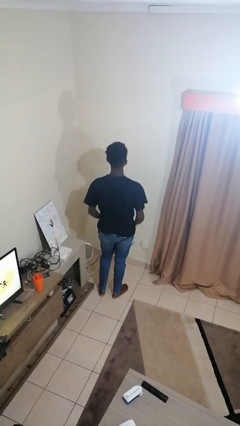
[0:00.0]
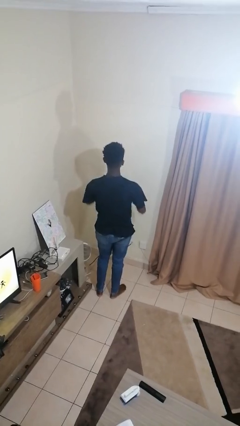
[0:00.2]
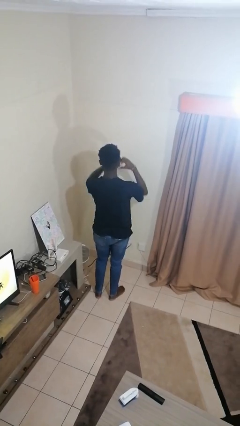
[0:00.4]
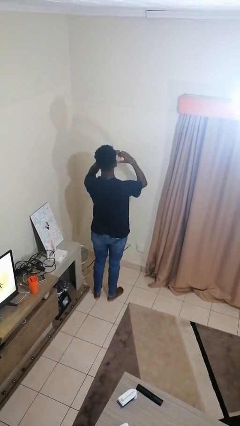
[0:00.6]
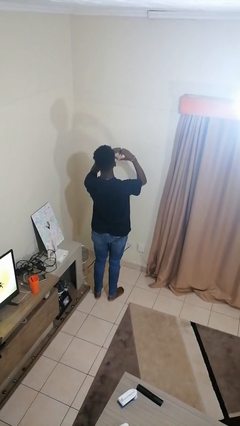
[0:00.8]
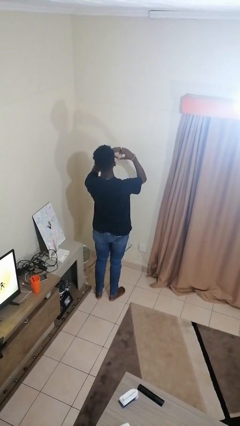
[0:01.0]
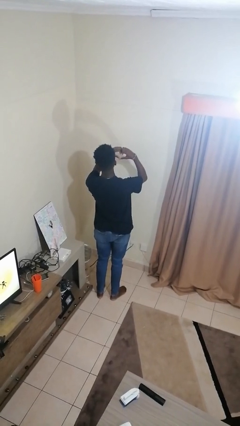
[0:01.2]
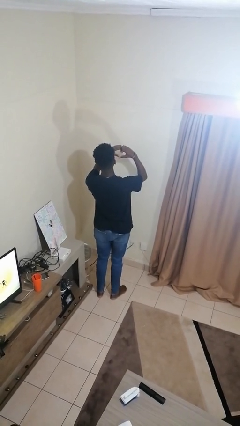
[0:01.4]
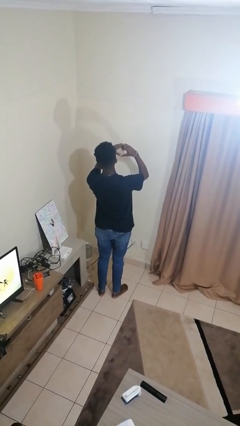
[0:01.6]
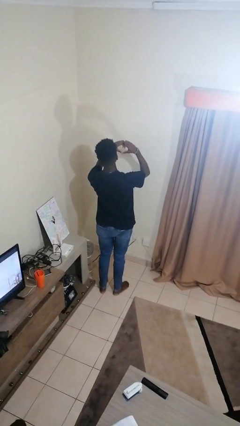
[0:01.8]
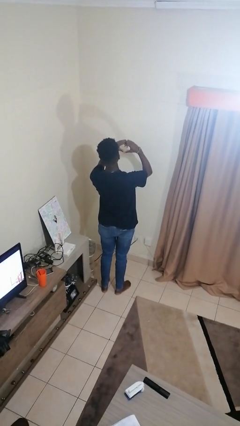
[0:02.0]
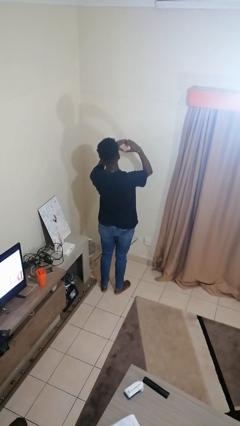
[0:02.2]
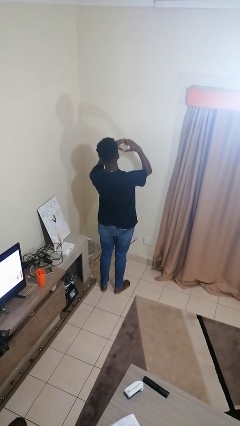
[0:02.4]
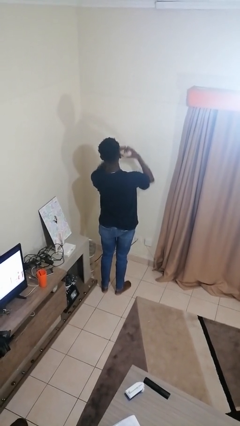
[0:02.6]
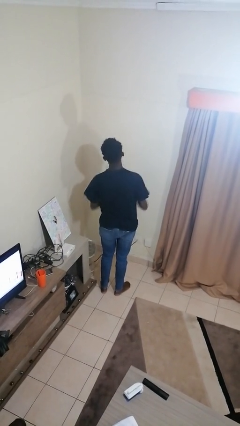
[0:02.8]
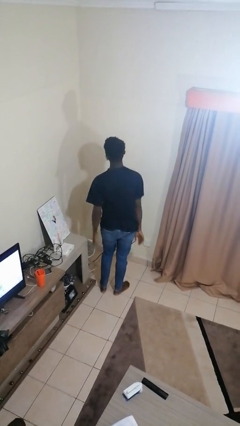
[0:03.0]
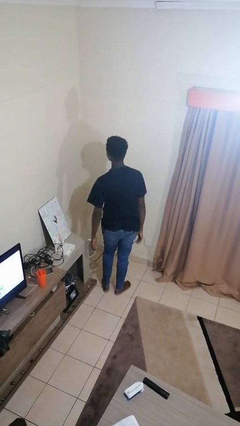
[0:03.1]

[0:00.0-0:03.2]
person gestures heart

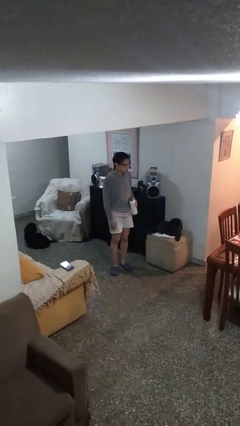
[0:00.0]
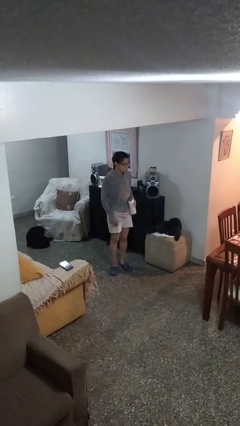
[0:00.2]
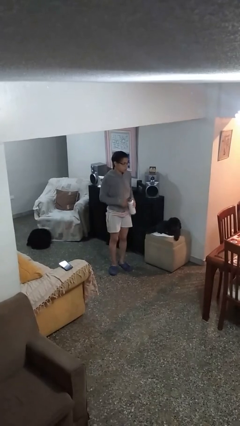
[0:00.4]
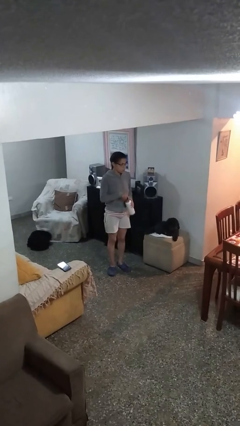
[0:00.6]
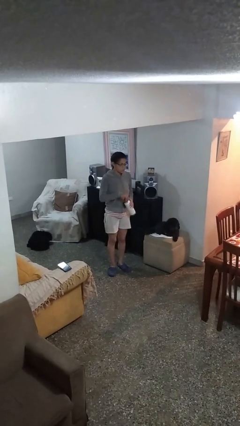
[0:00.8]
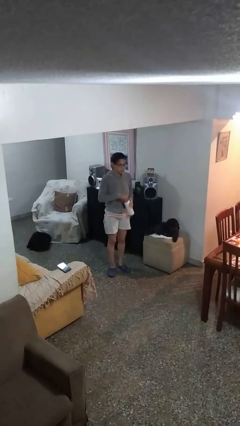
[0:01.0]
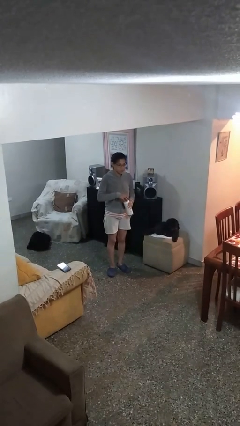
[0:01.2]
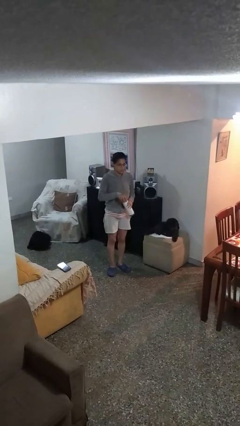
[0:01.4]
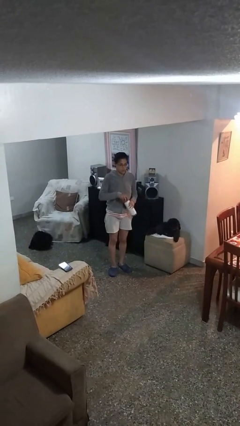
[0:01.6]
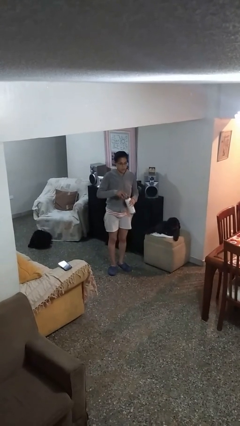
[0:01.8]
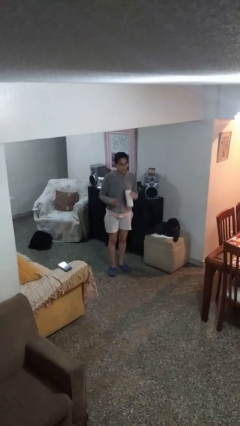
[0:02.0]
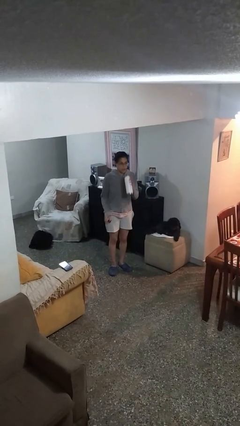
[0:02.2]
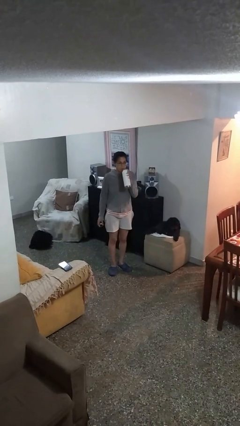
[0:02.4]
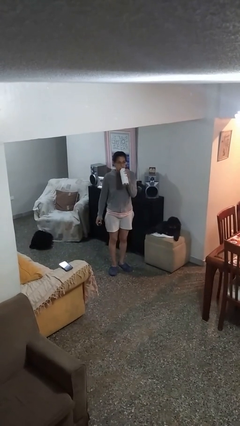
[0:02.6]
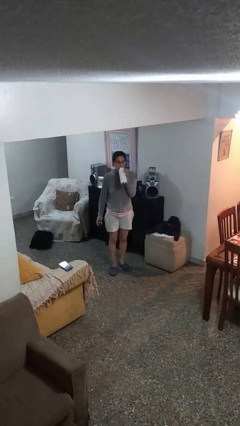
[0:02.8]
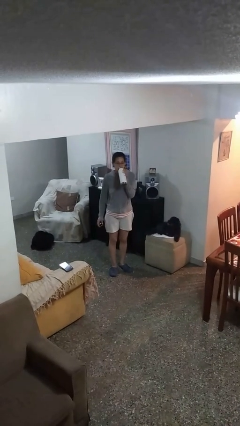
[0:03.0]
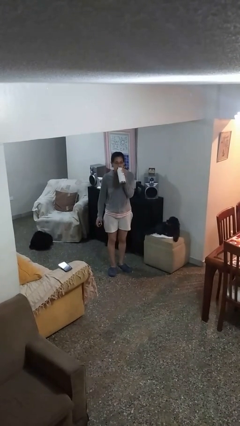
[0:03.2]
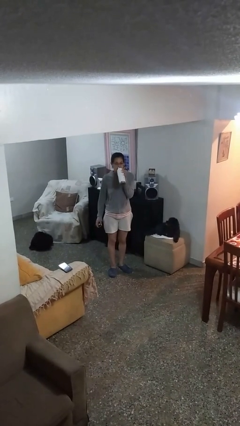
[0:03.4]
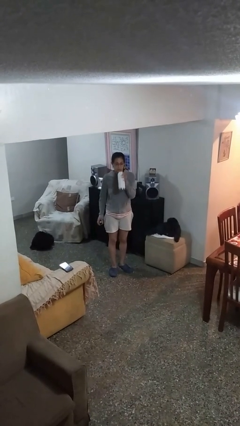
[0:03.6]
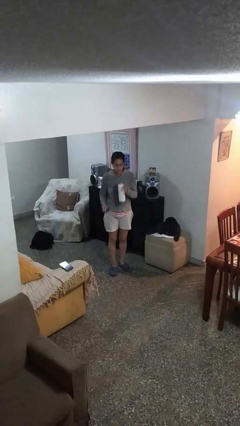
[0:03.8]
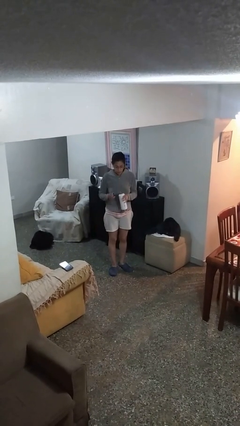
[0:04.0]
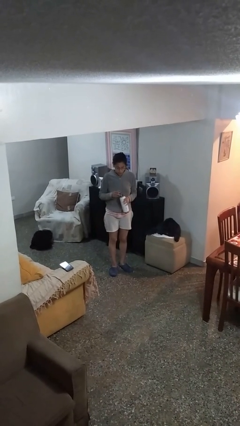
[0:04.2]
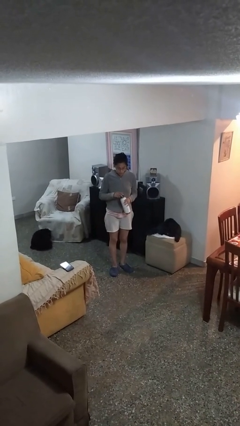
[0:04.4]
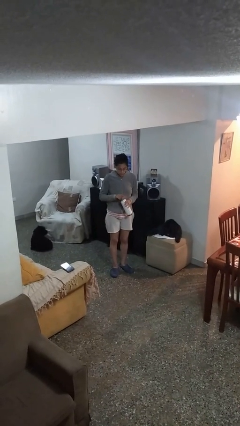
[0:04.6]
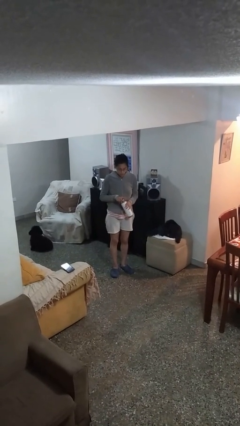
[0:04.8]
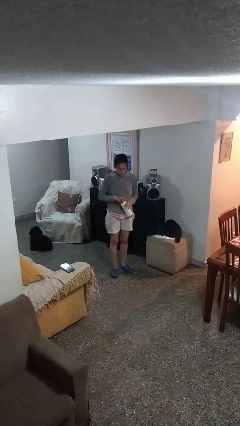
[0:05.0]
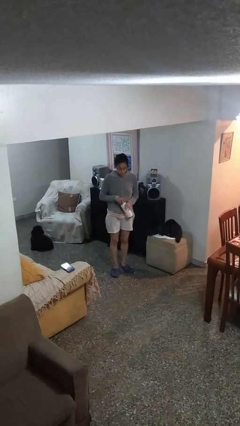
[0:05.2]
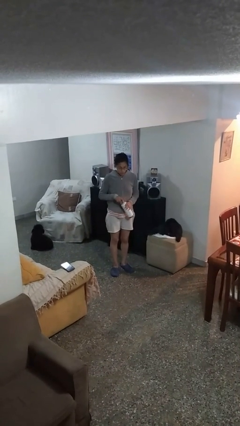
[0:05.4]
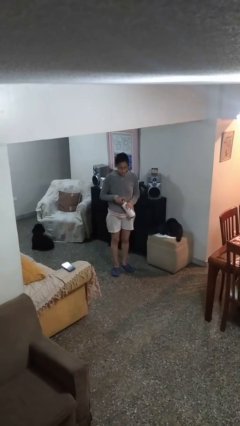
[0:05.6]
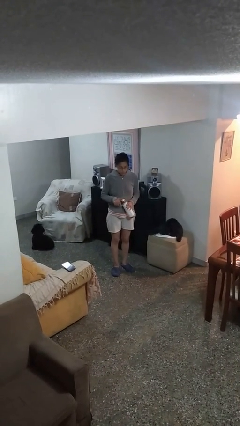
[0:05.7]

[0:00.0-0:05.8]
person drinks from bottle

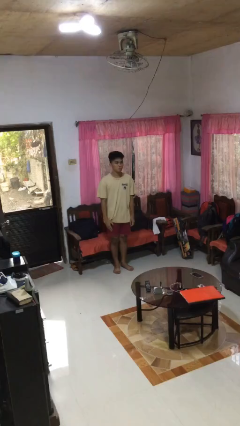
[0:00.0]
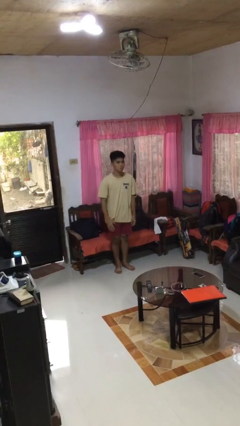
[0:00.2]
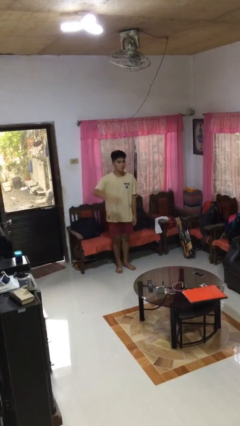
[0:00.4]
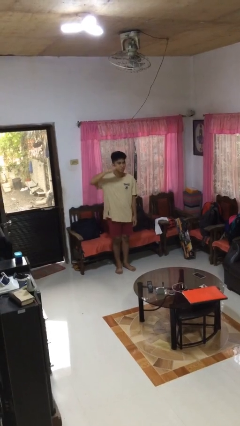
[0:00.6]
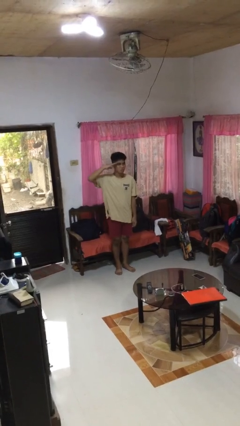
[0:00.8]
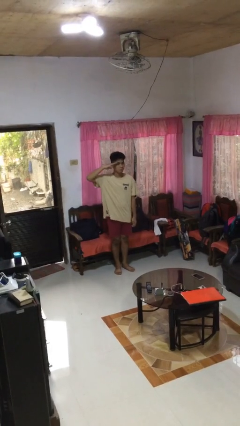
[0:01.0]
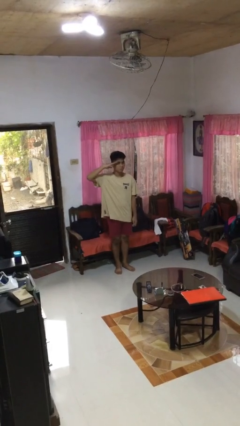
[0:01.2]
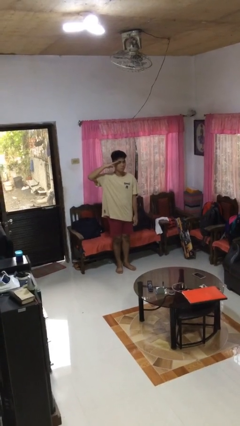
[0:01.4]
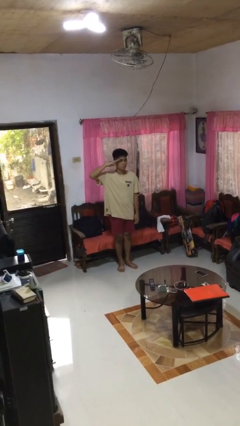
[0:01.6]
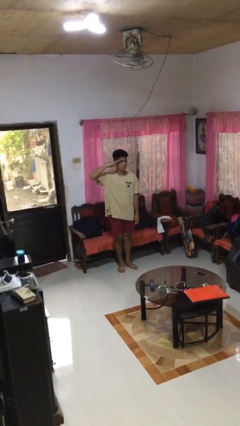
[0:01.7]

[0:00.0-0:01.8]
person salutes

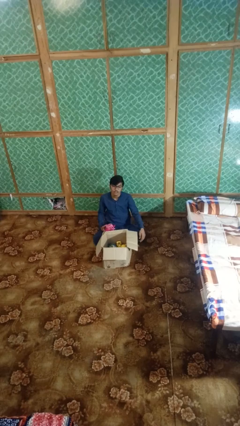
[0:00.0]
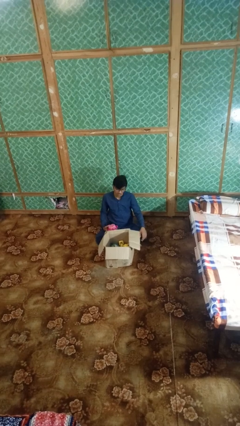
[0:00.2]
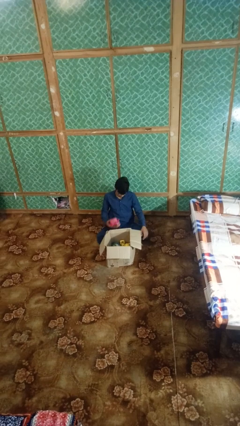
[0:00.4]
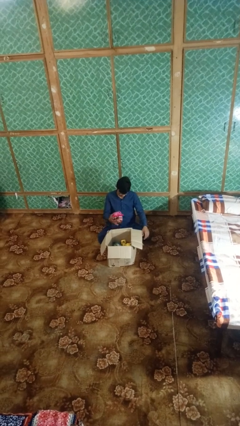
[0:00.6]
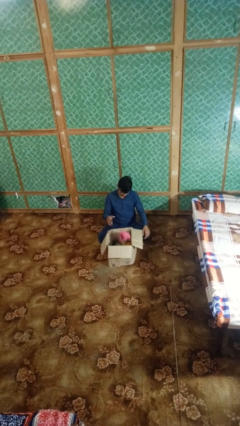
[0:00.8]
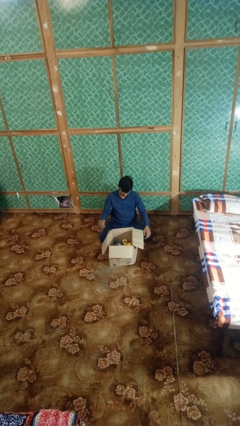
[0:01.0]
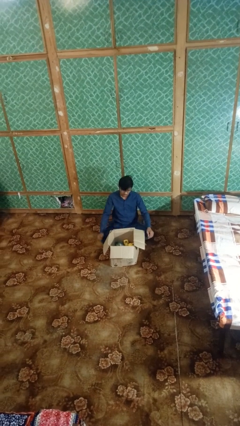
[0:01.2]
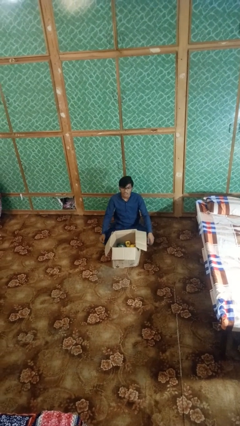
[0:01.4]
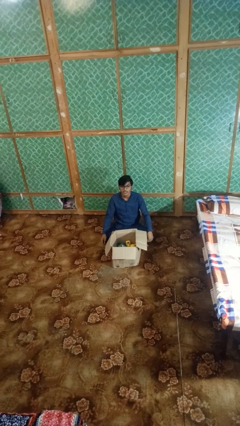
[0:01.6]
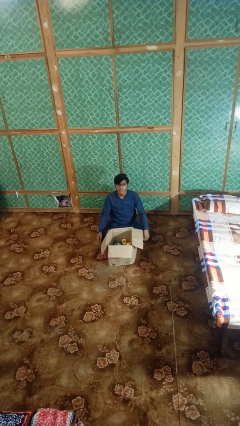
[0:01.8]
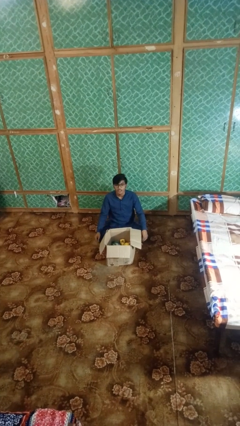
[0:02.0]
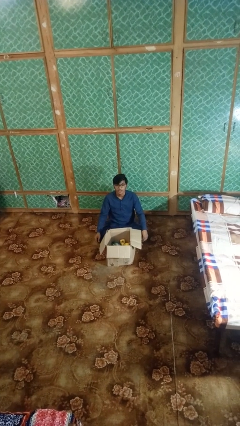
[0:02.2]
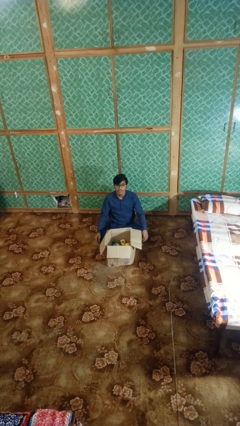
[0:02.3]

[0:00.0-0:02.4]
person puts object into box

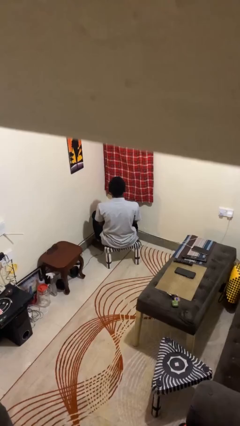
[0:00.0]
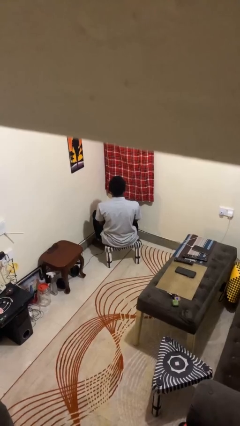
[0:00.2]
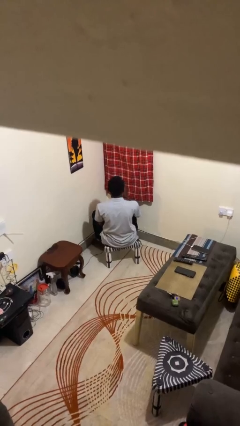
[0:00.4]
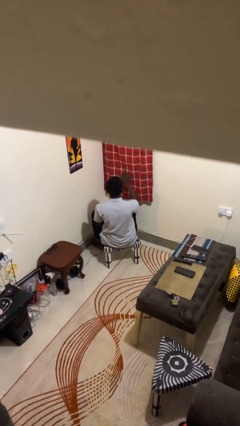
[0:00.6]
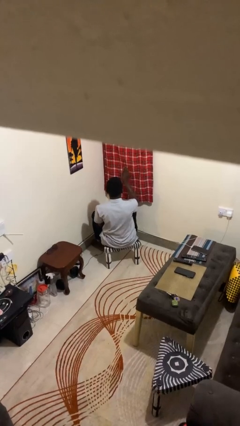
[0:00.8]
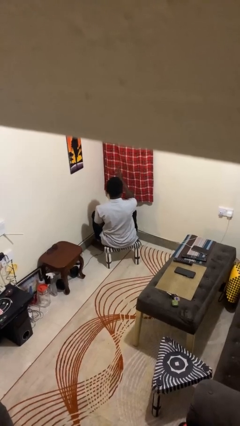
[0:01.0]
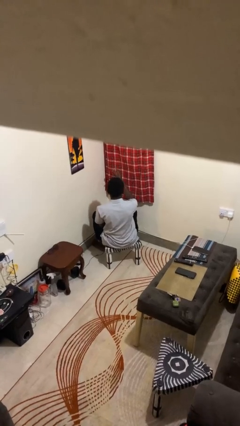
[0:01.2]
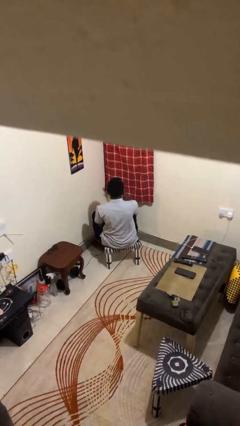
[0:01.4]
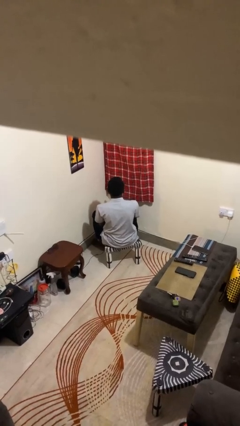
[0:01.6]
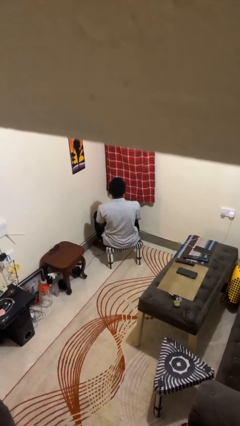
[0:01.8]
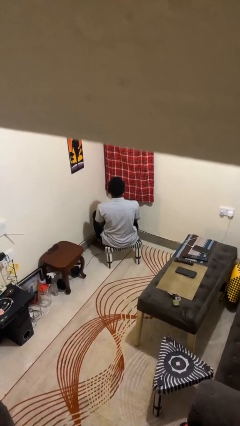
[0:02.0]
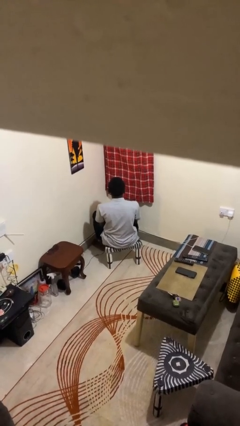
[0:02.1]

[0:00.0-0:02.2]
person gestures swipe left

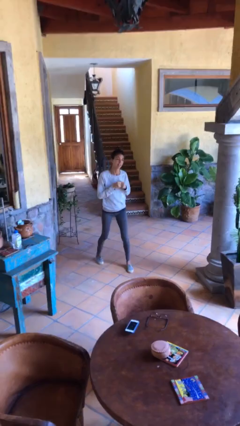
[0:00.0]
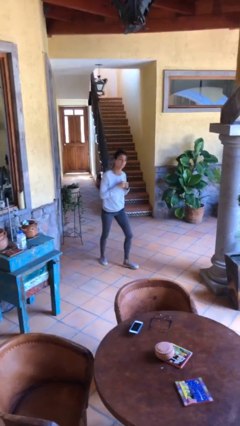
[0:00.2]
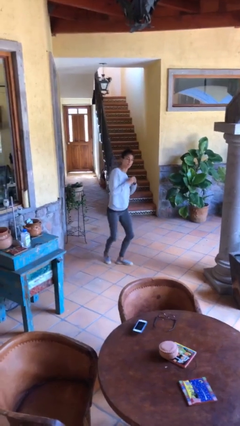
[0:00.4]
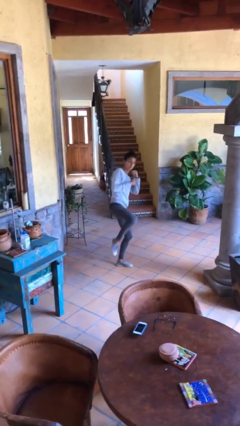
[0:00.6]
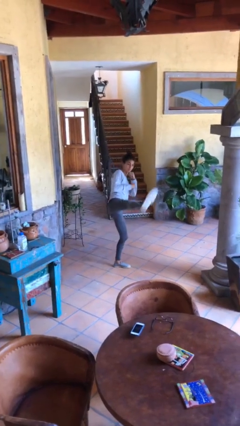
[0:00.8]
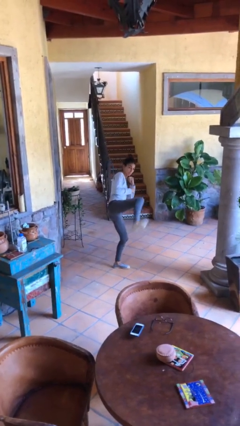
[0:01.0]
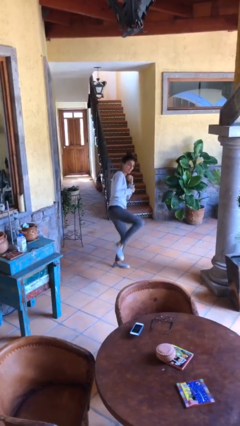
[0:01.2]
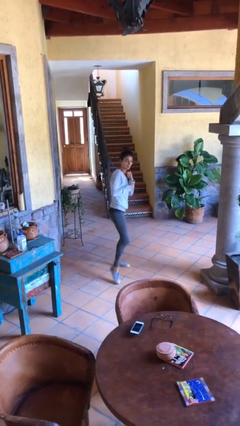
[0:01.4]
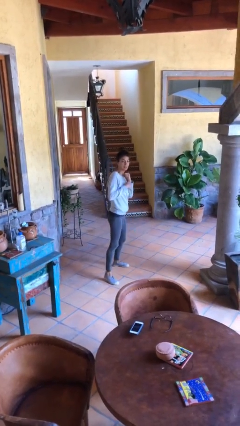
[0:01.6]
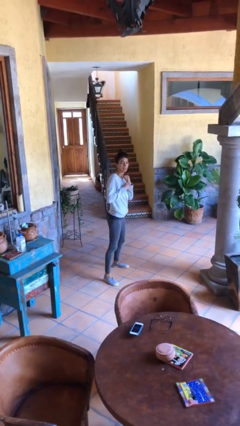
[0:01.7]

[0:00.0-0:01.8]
person karate kicks

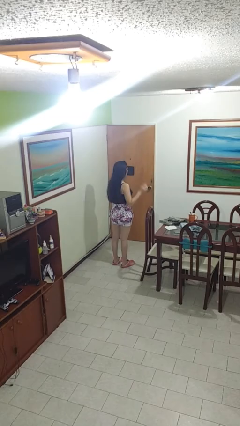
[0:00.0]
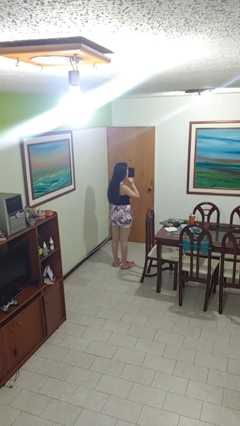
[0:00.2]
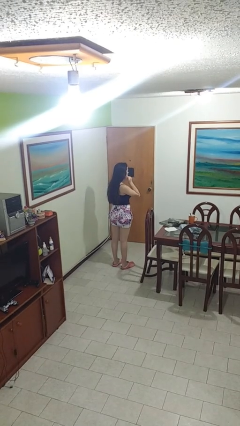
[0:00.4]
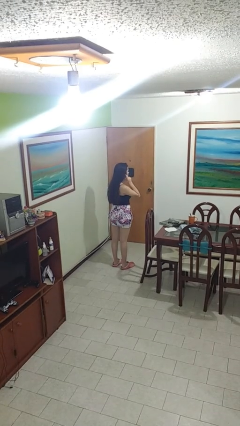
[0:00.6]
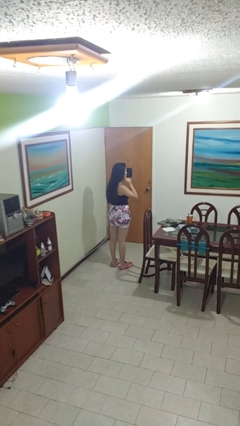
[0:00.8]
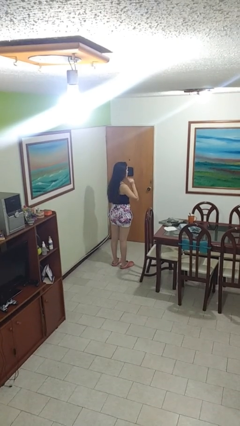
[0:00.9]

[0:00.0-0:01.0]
person gestures listen closely
